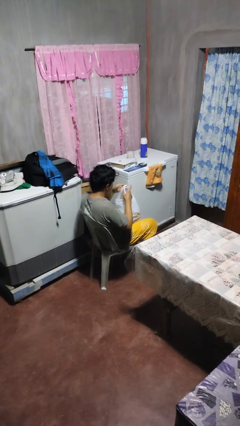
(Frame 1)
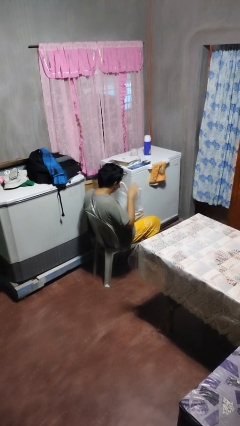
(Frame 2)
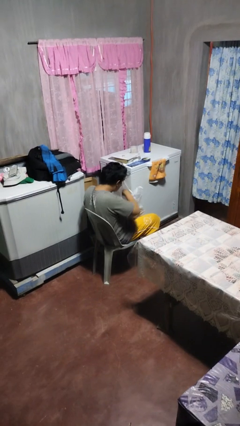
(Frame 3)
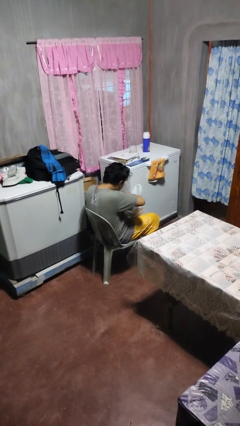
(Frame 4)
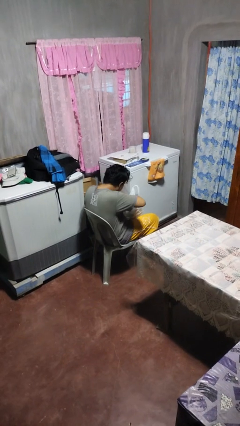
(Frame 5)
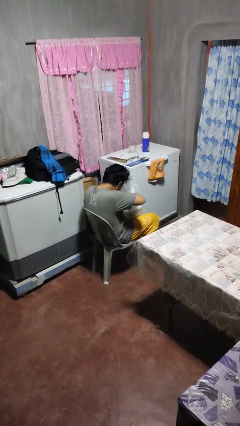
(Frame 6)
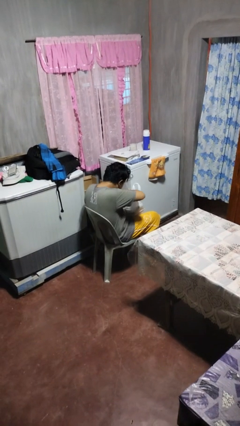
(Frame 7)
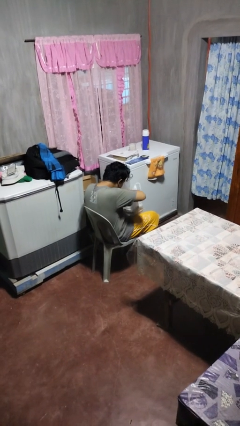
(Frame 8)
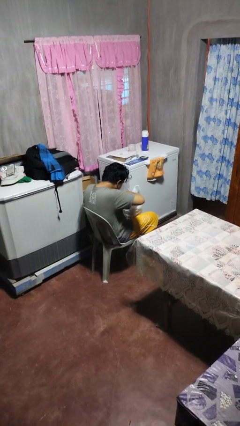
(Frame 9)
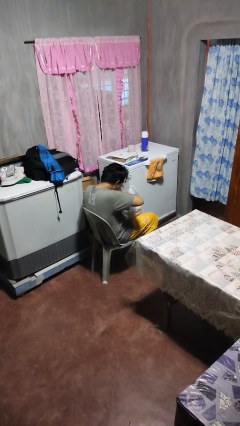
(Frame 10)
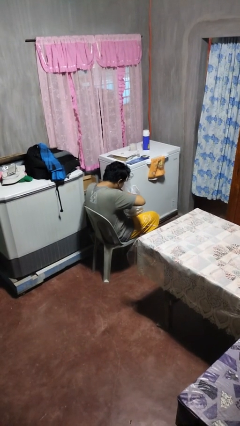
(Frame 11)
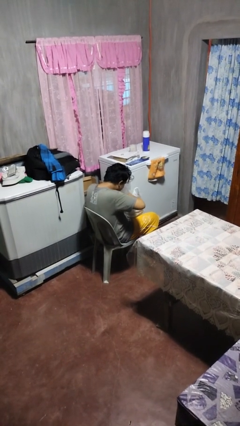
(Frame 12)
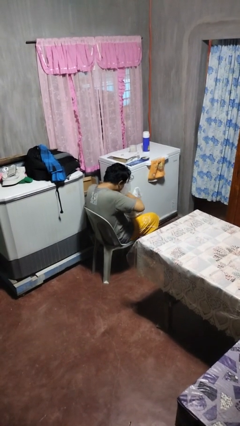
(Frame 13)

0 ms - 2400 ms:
person searches in bag

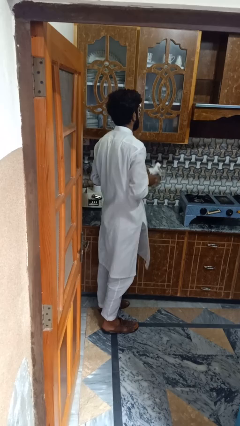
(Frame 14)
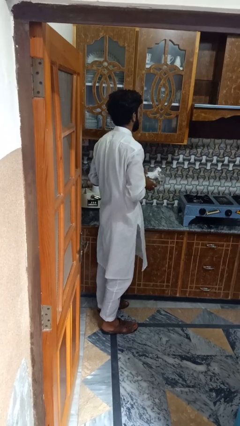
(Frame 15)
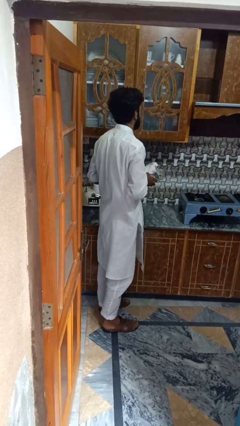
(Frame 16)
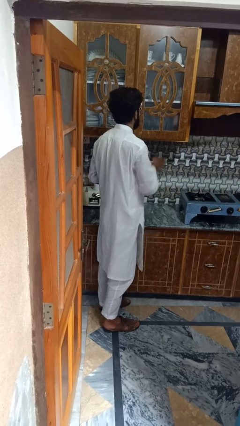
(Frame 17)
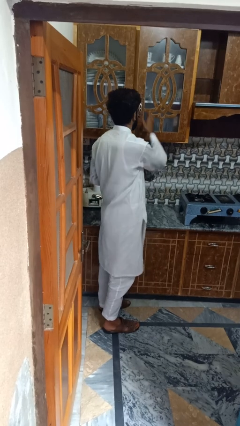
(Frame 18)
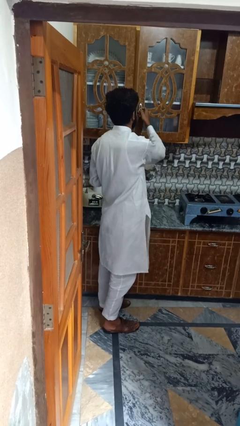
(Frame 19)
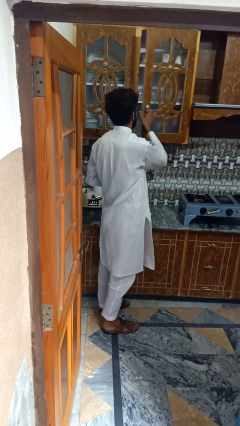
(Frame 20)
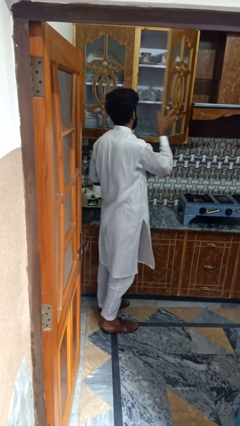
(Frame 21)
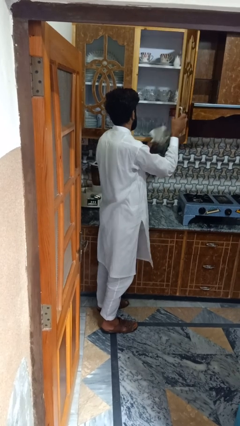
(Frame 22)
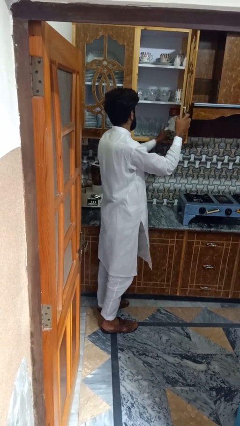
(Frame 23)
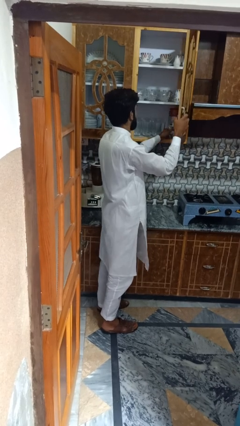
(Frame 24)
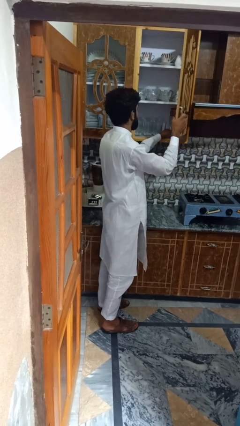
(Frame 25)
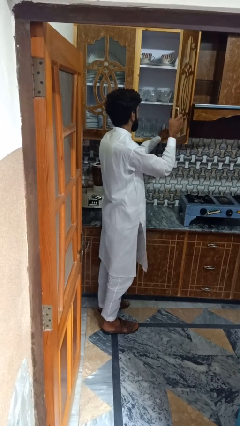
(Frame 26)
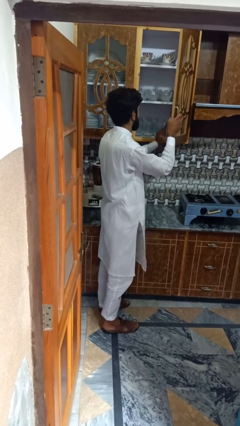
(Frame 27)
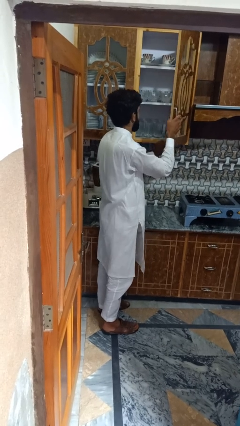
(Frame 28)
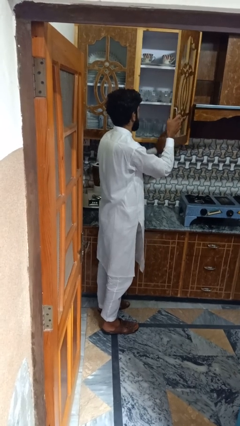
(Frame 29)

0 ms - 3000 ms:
person takes object from kitchen drawer

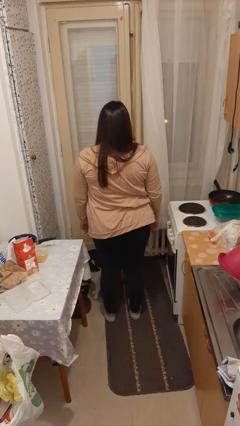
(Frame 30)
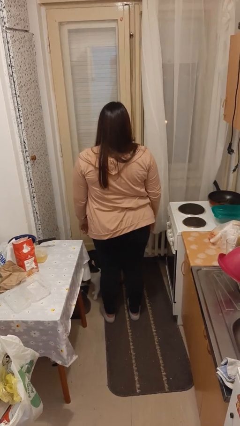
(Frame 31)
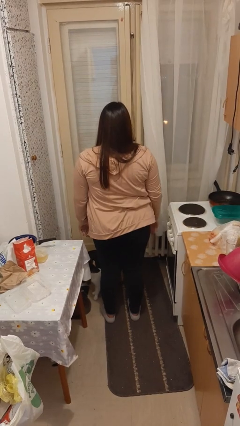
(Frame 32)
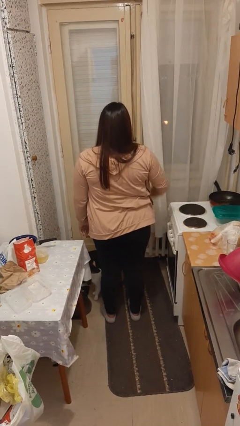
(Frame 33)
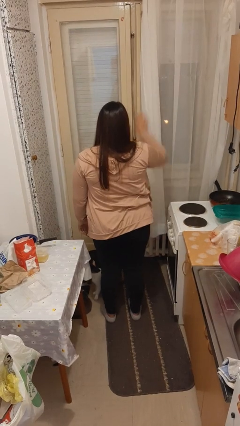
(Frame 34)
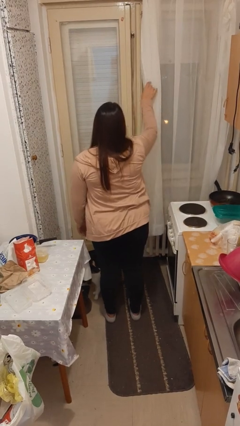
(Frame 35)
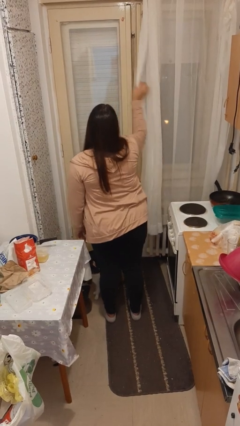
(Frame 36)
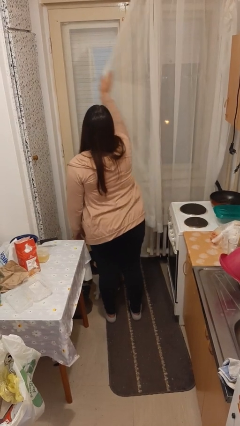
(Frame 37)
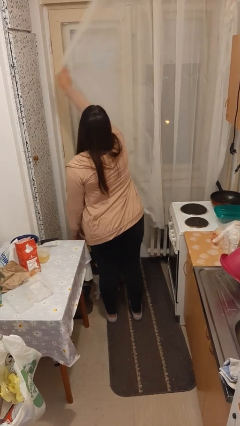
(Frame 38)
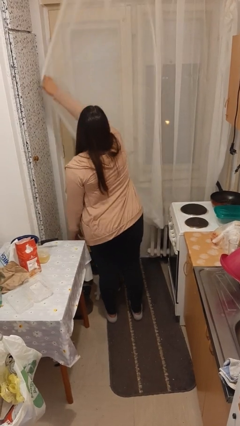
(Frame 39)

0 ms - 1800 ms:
person closes curtains

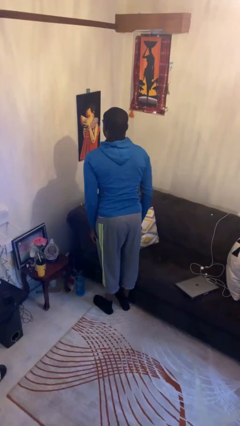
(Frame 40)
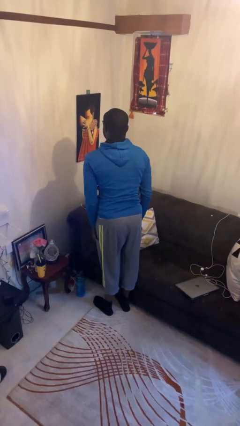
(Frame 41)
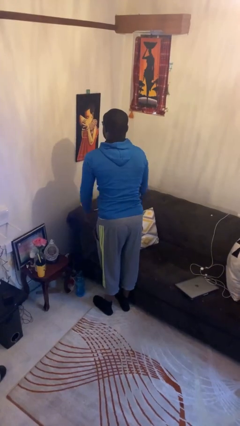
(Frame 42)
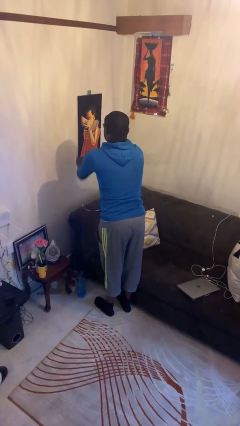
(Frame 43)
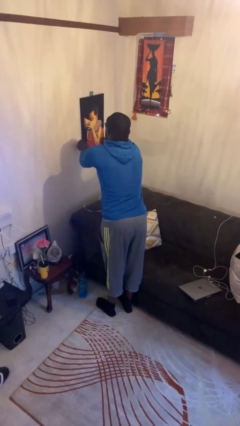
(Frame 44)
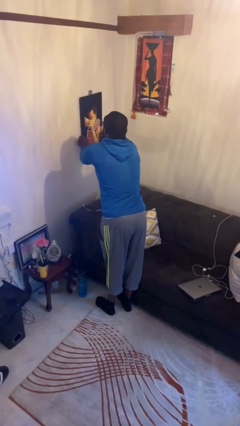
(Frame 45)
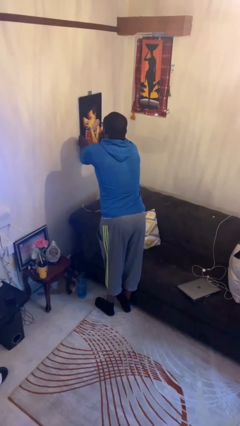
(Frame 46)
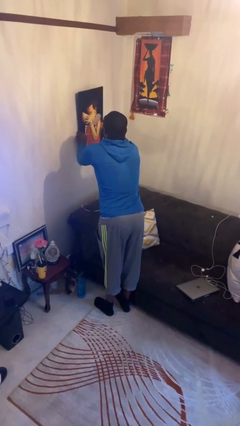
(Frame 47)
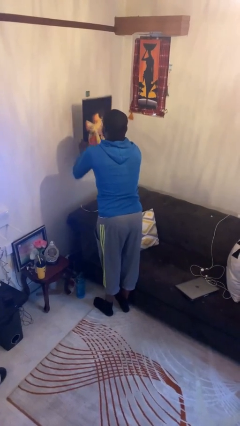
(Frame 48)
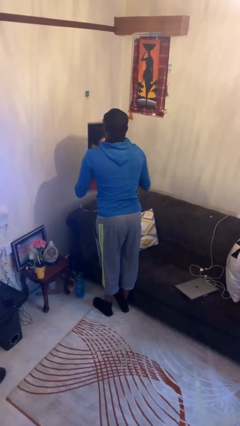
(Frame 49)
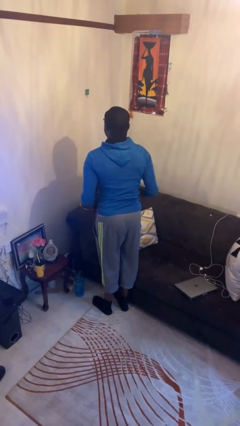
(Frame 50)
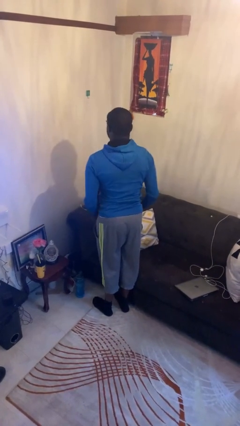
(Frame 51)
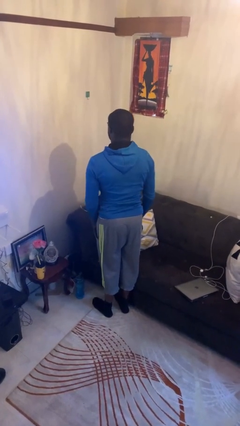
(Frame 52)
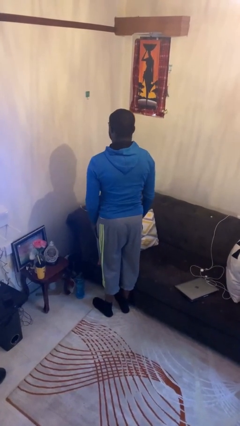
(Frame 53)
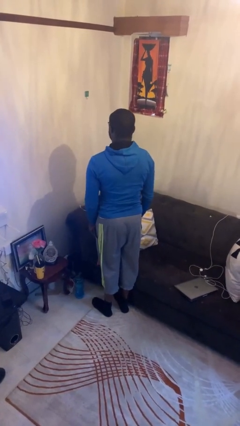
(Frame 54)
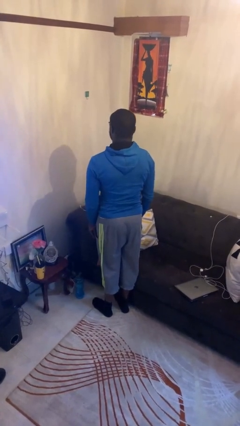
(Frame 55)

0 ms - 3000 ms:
person takes down picture frame

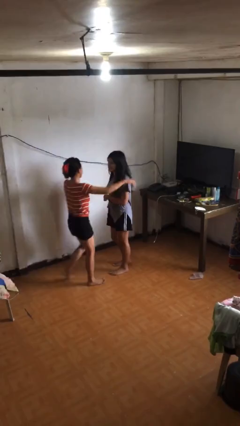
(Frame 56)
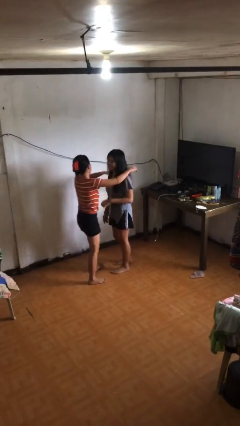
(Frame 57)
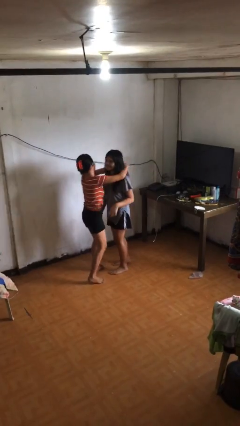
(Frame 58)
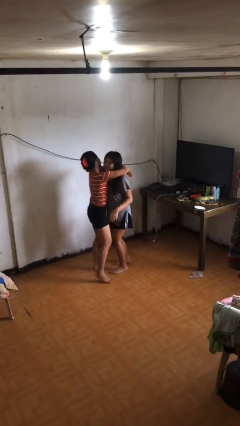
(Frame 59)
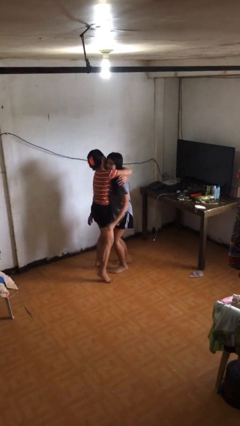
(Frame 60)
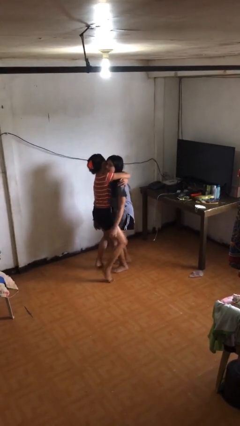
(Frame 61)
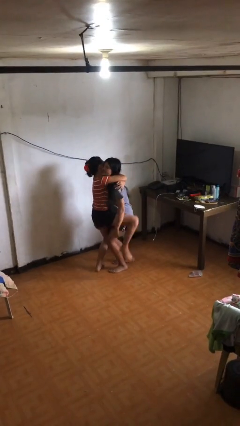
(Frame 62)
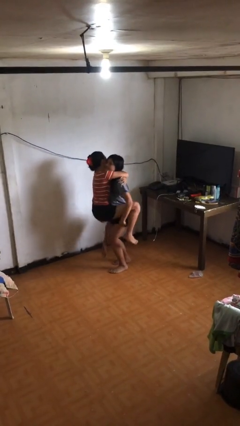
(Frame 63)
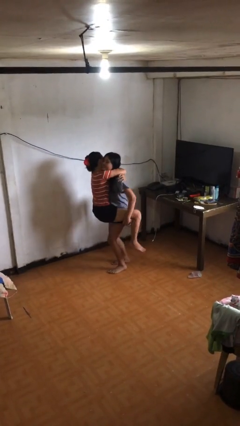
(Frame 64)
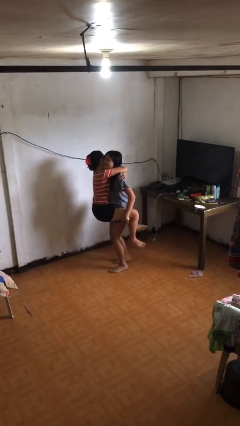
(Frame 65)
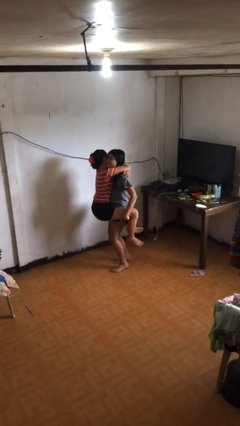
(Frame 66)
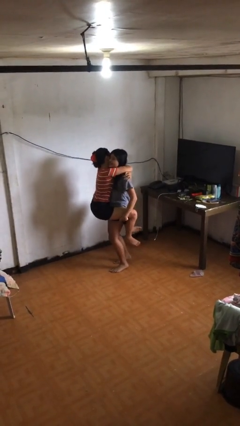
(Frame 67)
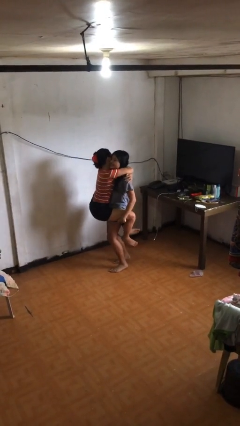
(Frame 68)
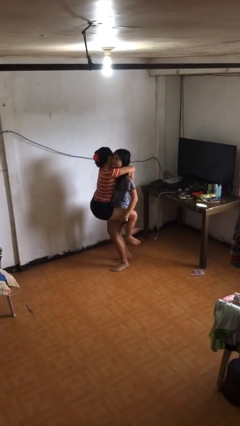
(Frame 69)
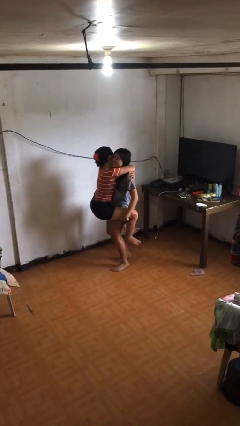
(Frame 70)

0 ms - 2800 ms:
person picks up person

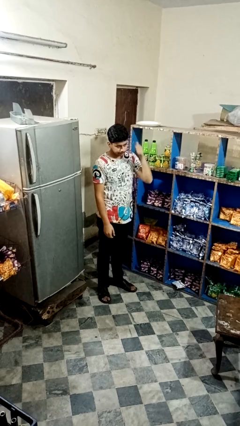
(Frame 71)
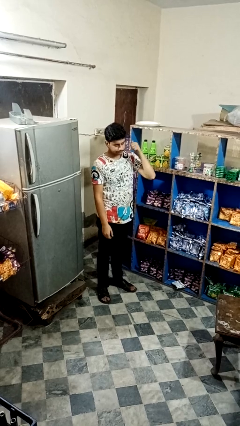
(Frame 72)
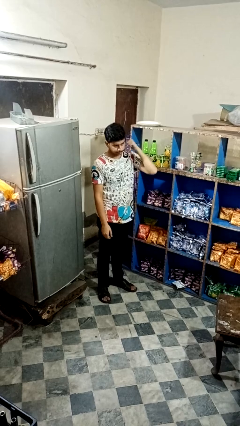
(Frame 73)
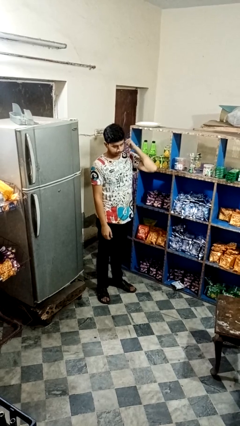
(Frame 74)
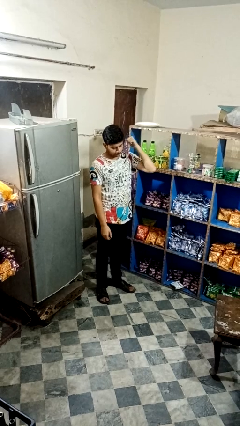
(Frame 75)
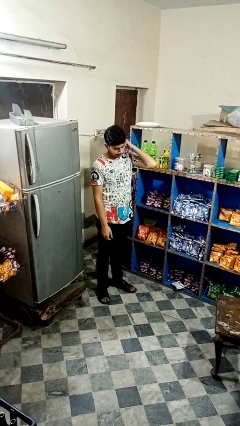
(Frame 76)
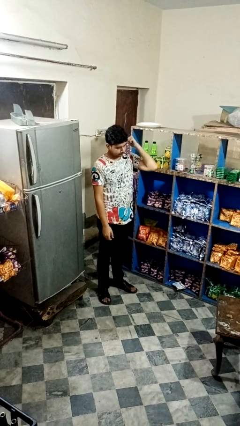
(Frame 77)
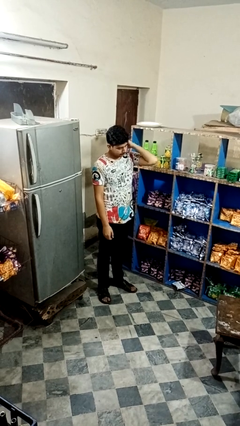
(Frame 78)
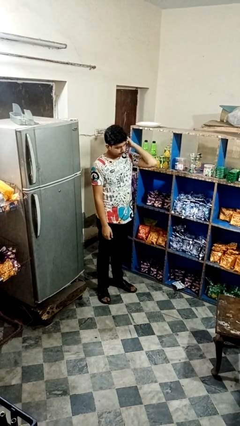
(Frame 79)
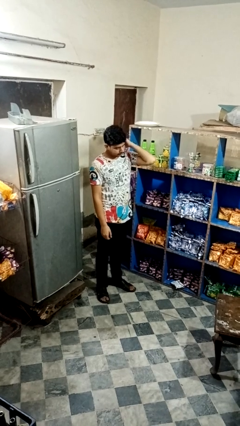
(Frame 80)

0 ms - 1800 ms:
person gestures behind me

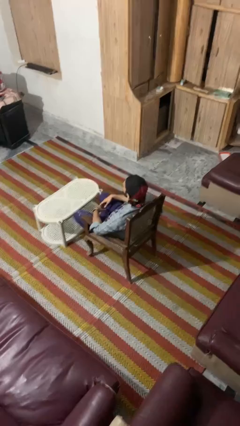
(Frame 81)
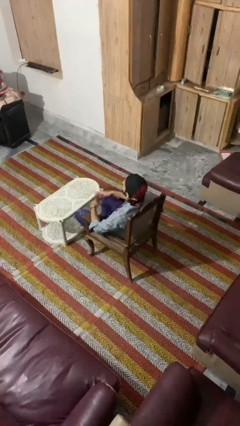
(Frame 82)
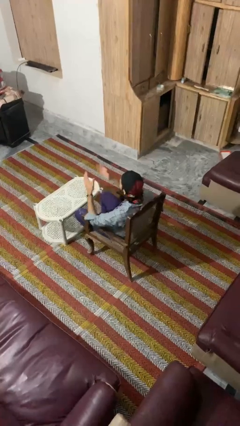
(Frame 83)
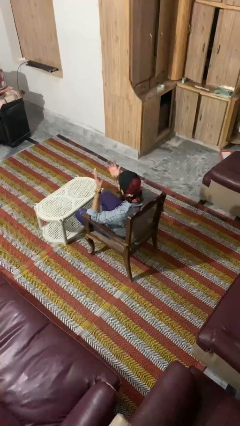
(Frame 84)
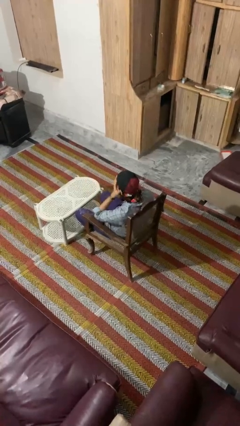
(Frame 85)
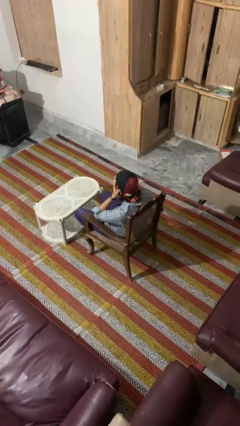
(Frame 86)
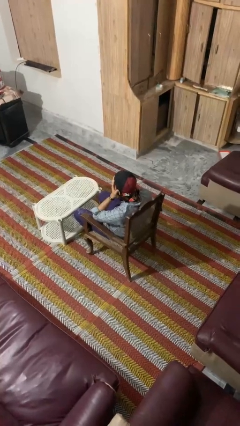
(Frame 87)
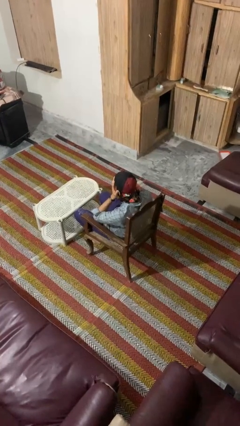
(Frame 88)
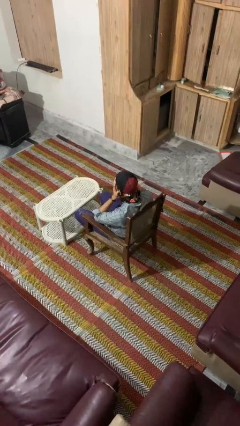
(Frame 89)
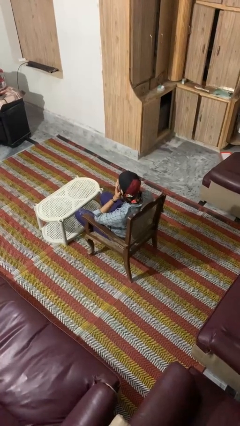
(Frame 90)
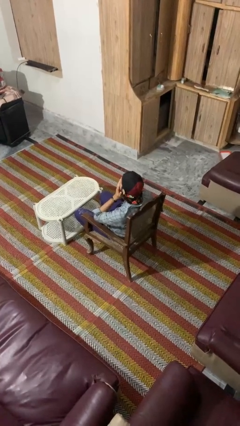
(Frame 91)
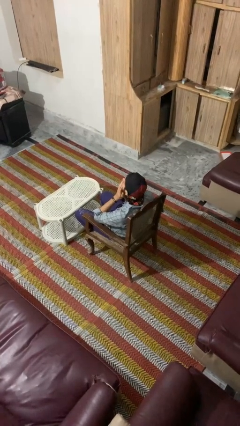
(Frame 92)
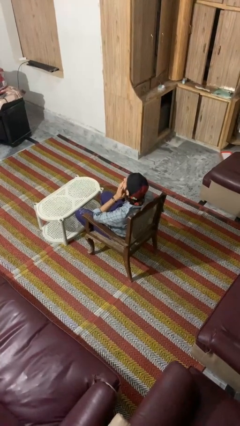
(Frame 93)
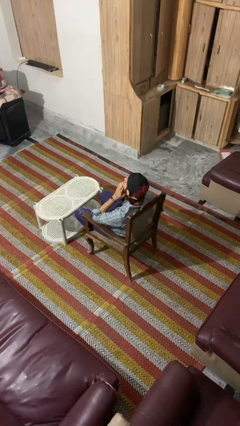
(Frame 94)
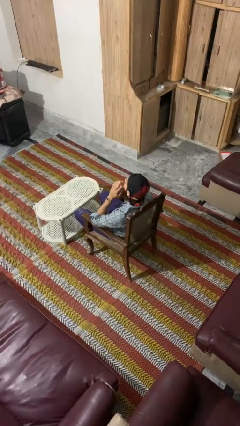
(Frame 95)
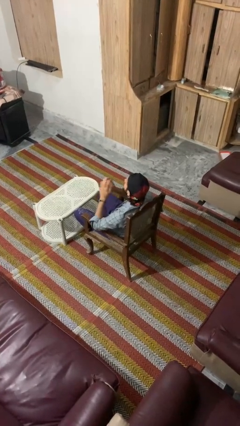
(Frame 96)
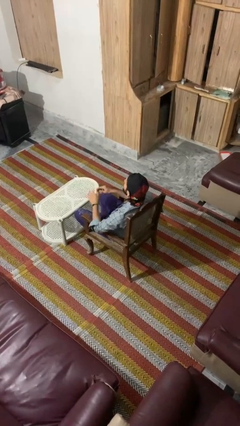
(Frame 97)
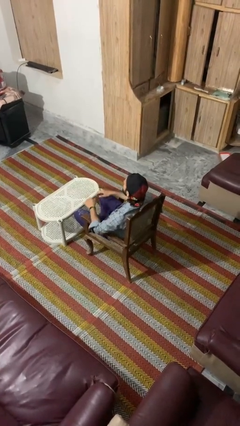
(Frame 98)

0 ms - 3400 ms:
person covers face with hands
